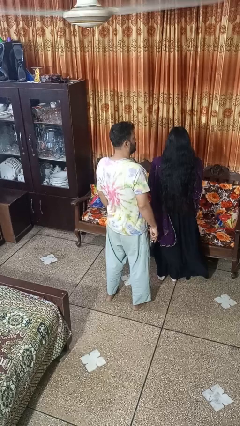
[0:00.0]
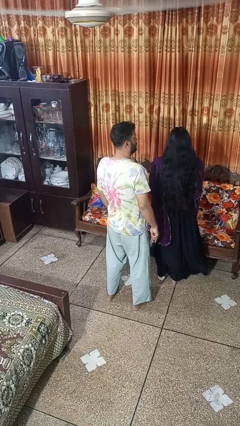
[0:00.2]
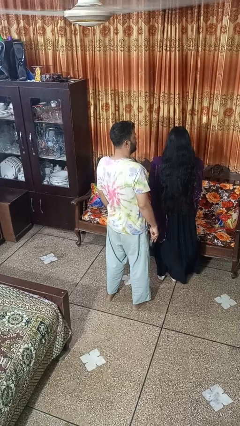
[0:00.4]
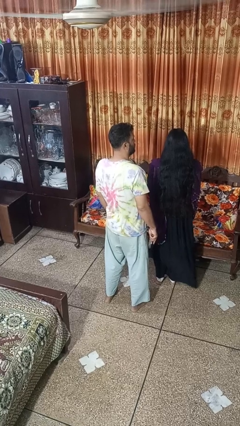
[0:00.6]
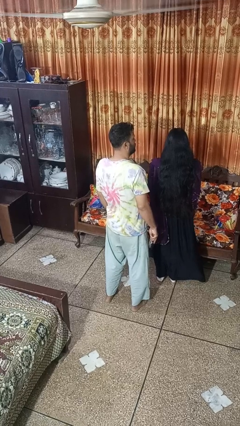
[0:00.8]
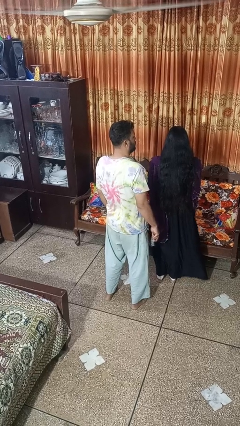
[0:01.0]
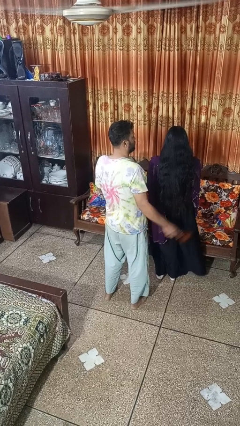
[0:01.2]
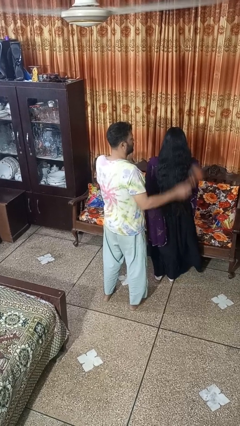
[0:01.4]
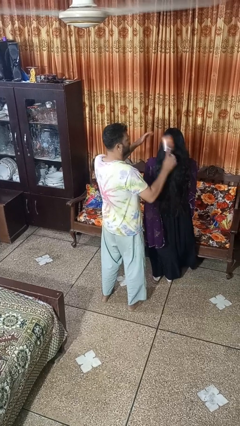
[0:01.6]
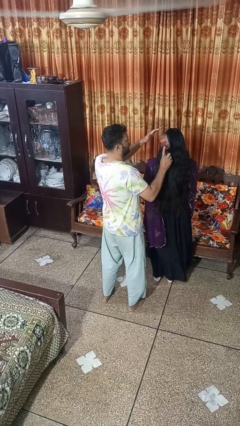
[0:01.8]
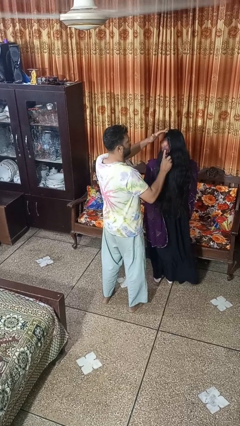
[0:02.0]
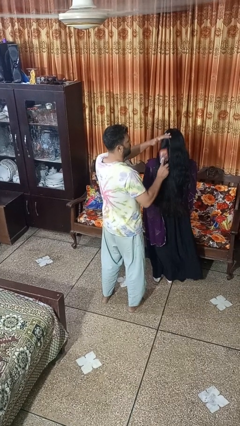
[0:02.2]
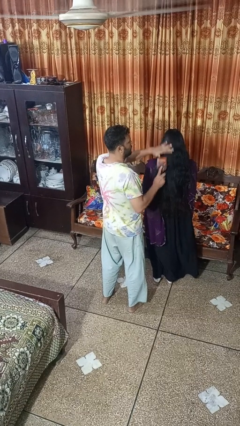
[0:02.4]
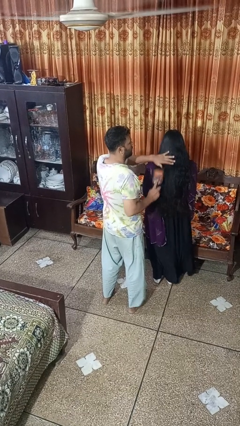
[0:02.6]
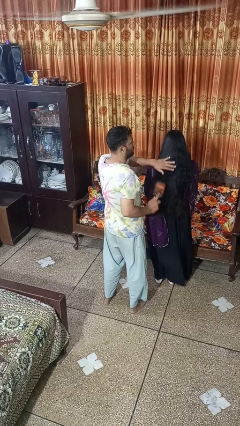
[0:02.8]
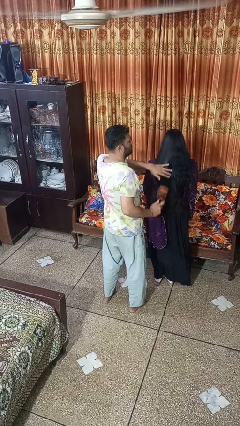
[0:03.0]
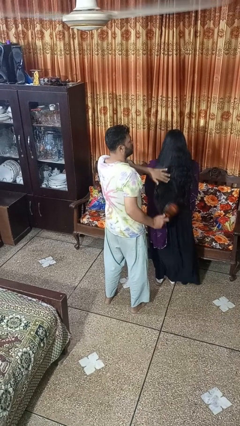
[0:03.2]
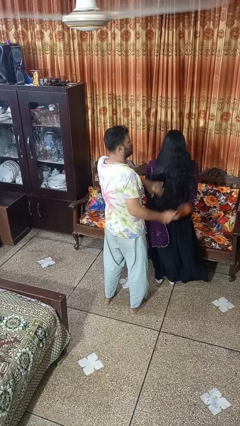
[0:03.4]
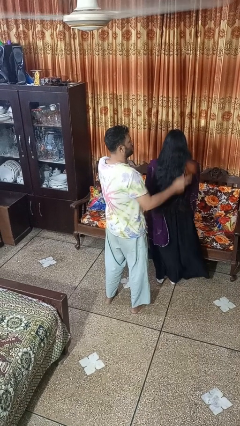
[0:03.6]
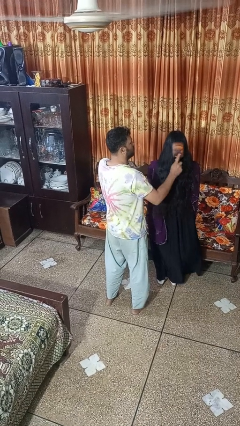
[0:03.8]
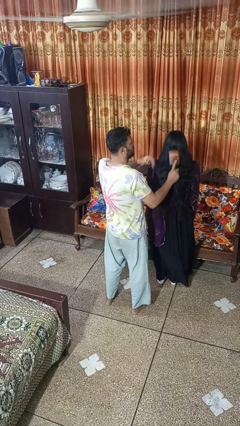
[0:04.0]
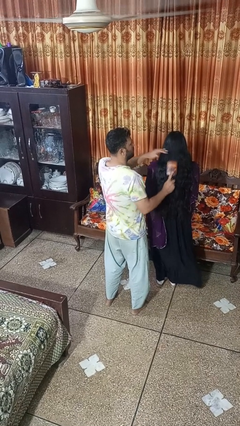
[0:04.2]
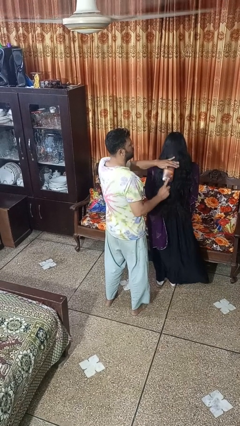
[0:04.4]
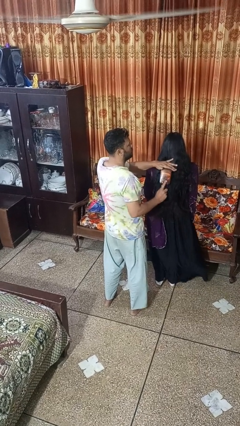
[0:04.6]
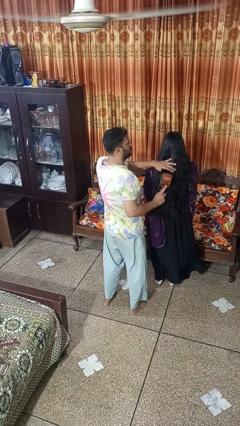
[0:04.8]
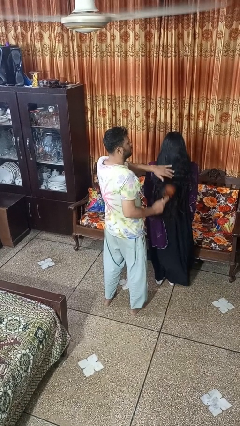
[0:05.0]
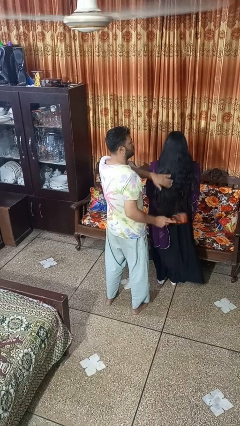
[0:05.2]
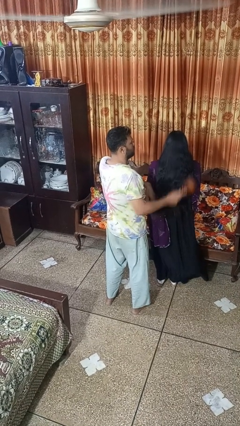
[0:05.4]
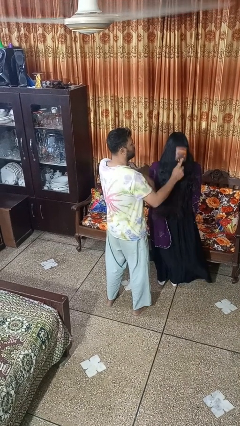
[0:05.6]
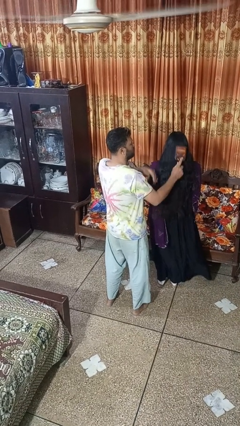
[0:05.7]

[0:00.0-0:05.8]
person brushes hair of person

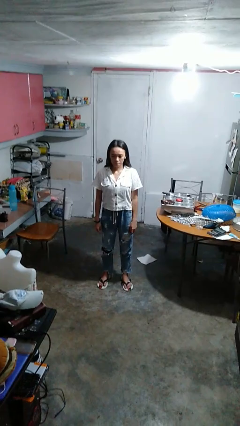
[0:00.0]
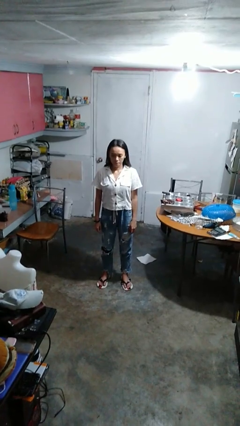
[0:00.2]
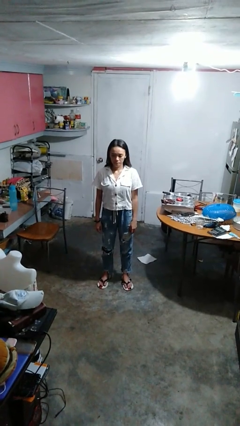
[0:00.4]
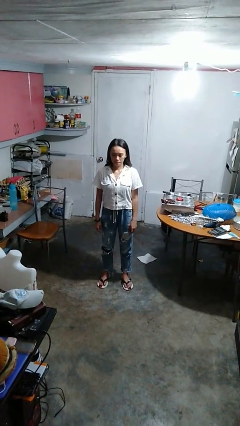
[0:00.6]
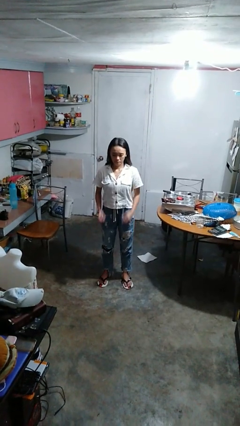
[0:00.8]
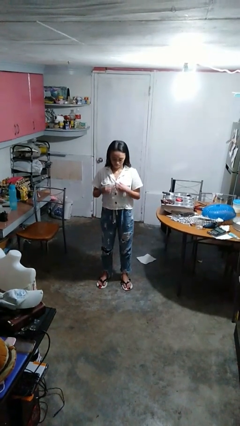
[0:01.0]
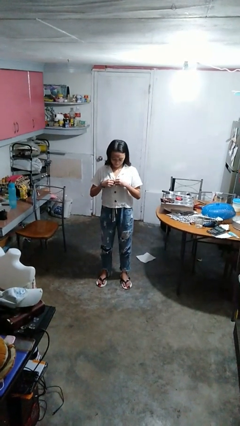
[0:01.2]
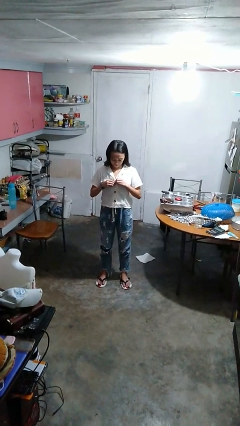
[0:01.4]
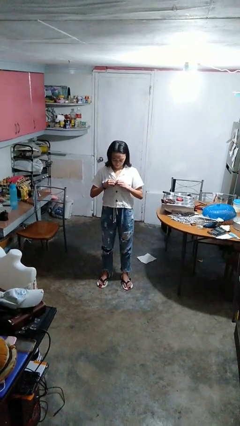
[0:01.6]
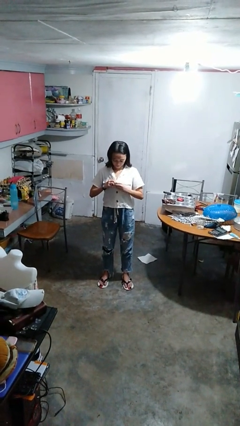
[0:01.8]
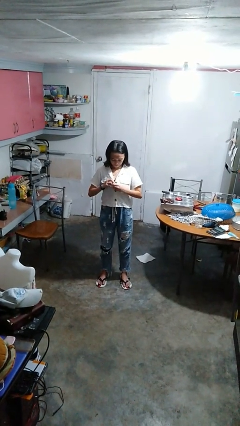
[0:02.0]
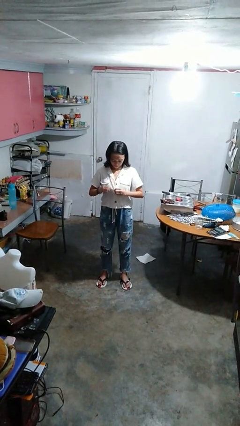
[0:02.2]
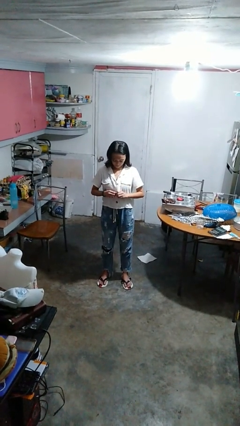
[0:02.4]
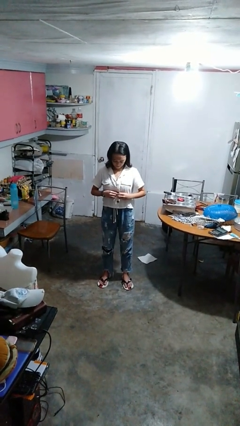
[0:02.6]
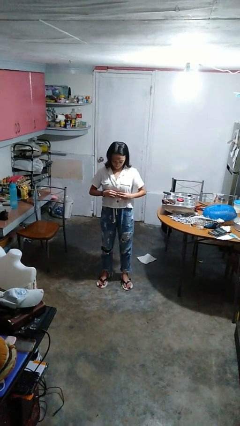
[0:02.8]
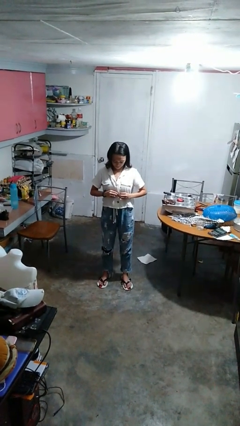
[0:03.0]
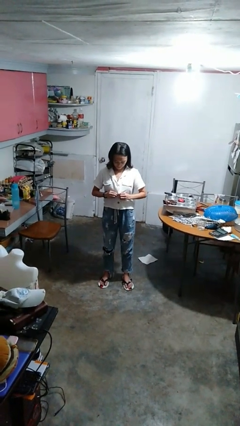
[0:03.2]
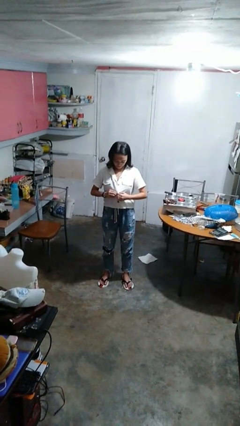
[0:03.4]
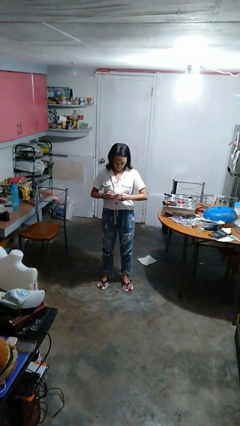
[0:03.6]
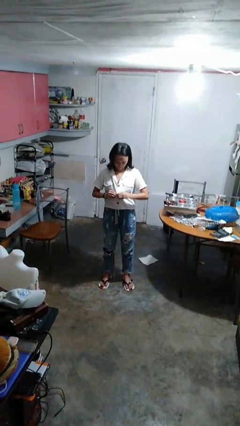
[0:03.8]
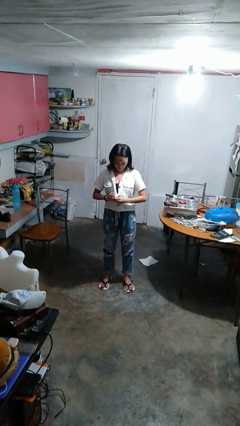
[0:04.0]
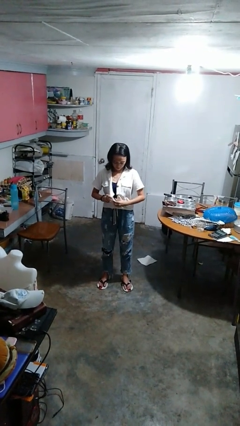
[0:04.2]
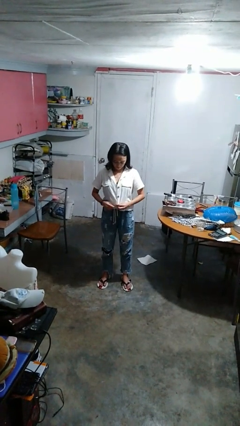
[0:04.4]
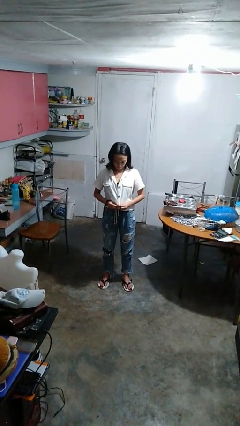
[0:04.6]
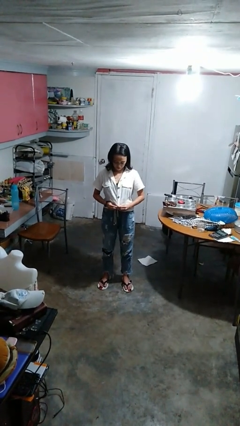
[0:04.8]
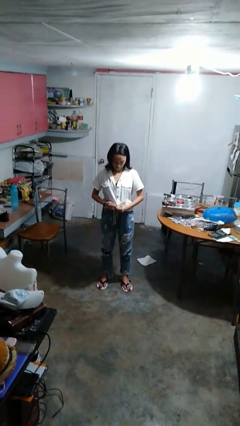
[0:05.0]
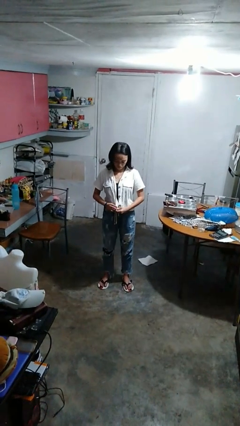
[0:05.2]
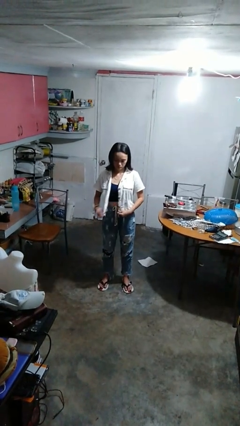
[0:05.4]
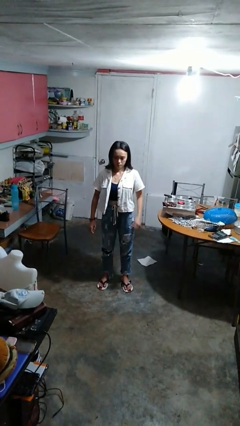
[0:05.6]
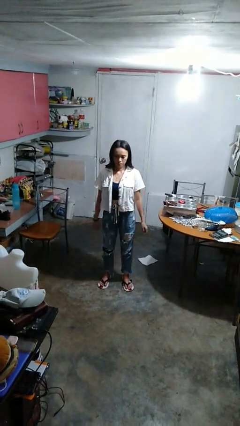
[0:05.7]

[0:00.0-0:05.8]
person unbuttons shirt

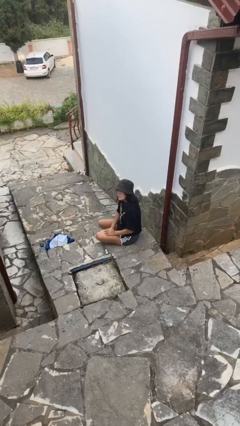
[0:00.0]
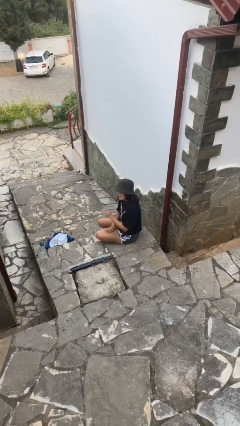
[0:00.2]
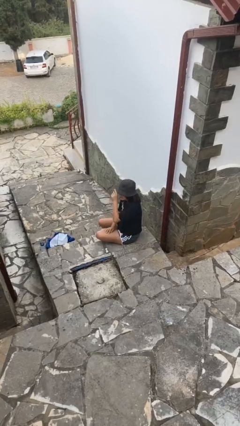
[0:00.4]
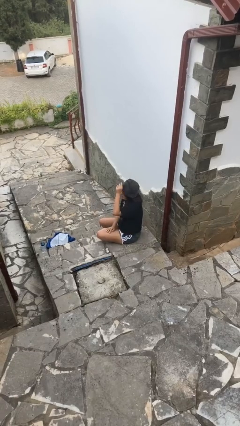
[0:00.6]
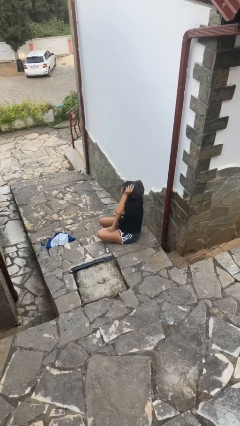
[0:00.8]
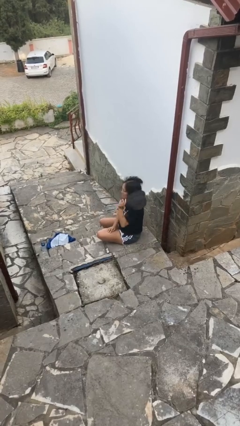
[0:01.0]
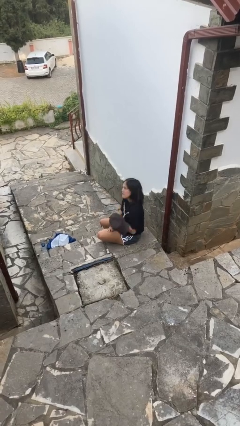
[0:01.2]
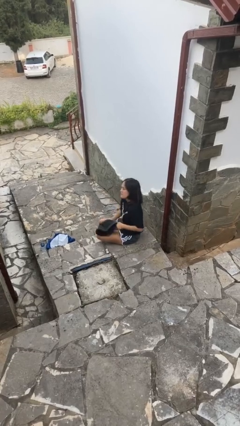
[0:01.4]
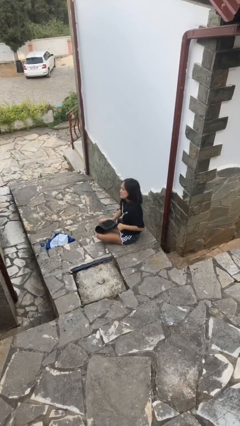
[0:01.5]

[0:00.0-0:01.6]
person takes off hat

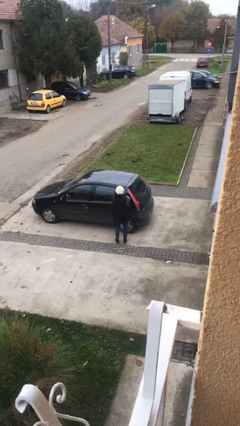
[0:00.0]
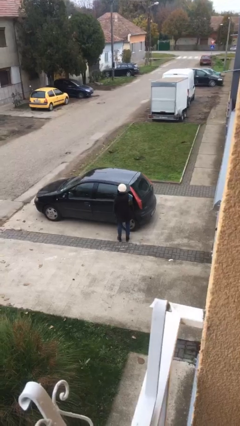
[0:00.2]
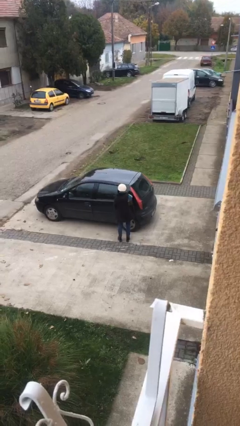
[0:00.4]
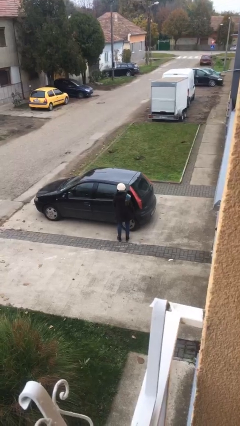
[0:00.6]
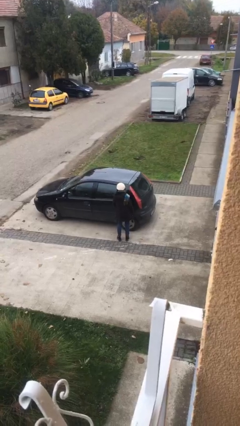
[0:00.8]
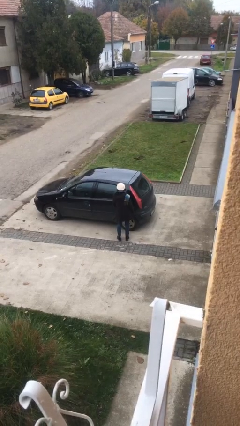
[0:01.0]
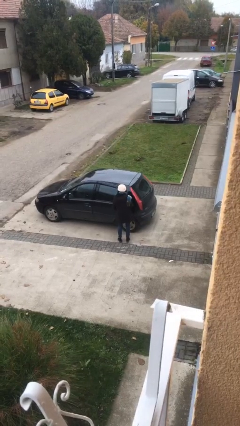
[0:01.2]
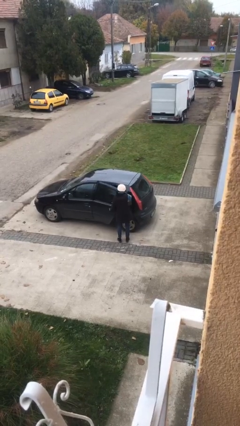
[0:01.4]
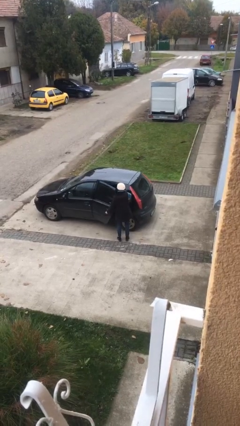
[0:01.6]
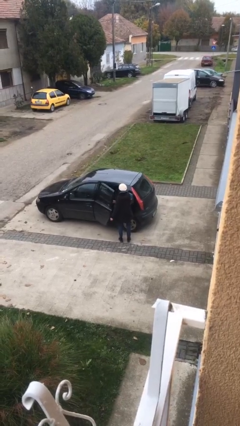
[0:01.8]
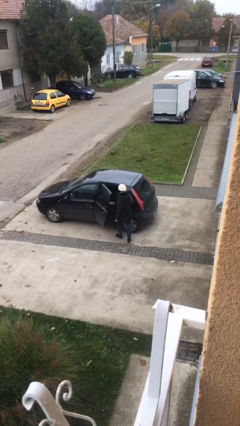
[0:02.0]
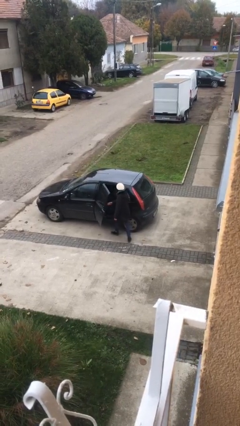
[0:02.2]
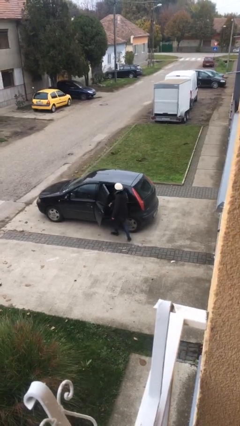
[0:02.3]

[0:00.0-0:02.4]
person opens car door

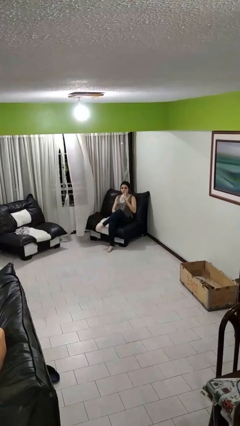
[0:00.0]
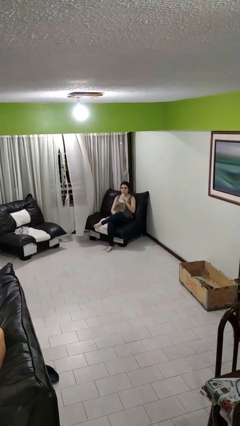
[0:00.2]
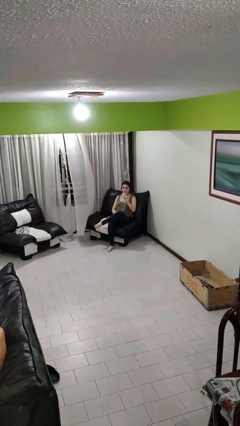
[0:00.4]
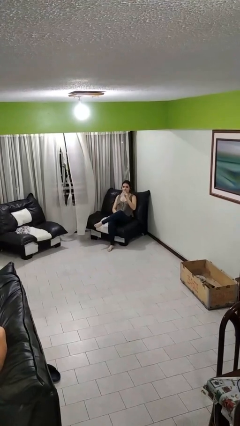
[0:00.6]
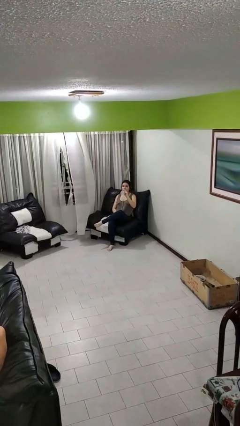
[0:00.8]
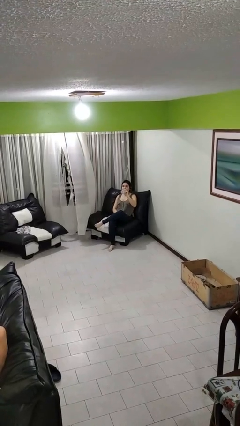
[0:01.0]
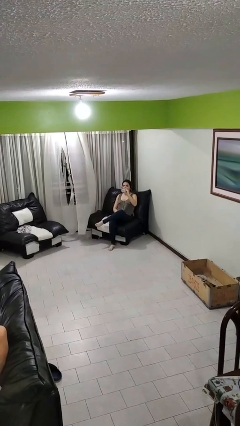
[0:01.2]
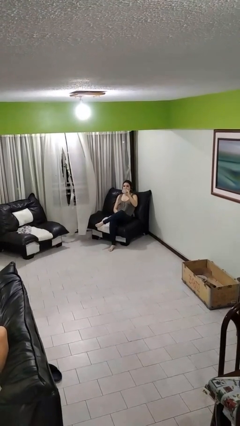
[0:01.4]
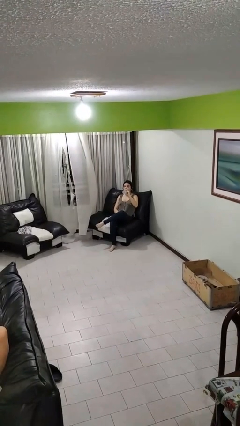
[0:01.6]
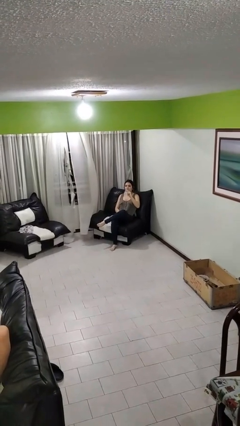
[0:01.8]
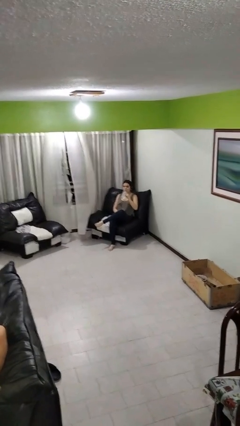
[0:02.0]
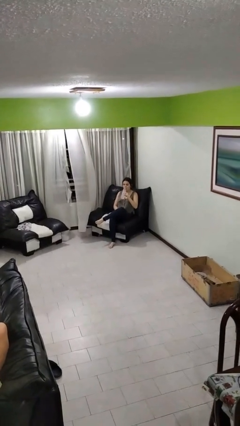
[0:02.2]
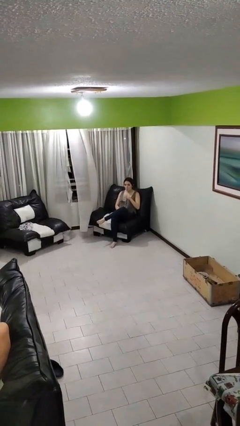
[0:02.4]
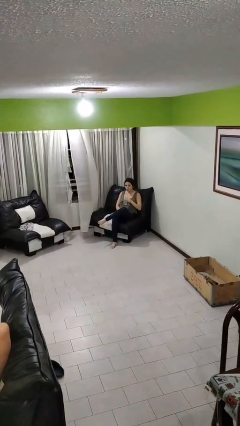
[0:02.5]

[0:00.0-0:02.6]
person drinks from bottle
